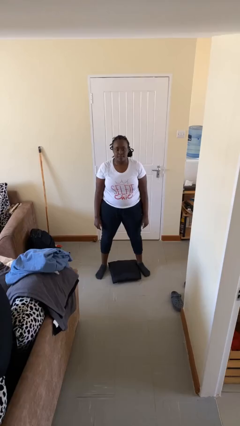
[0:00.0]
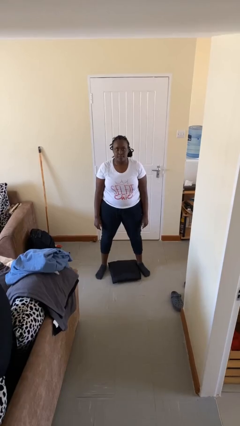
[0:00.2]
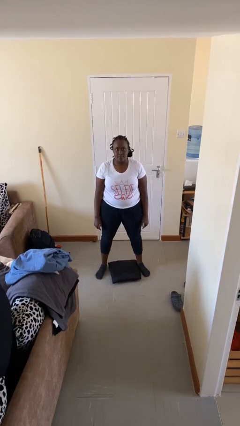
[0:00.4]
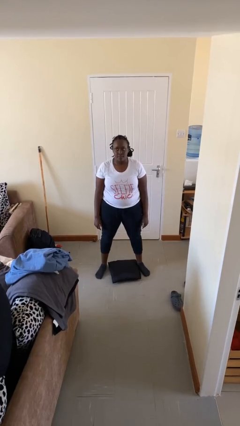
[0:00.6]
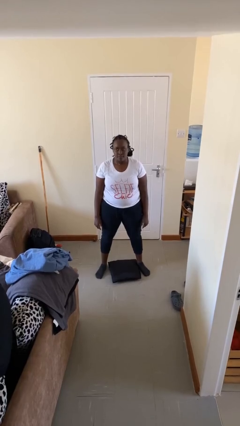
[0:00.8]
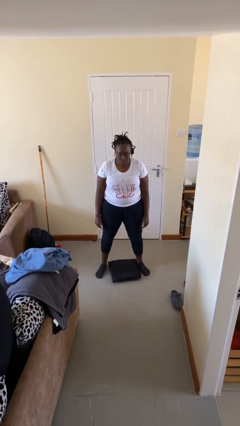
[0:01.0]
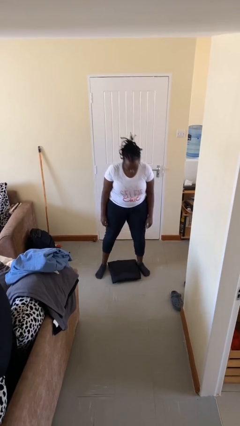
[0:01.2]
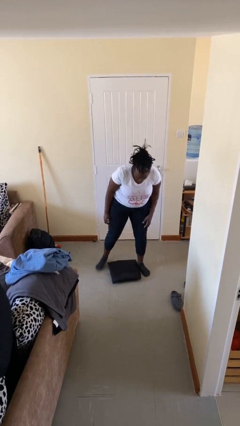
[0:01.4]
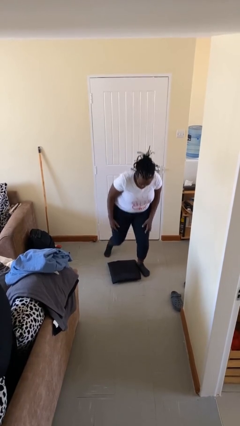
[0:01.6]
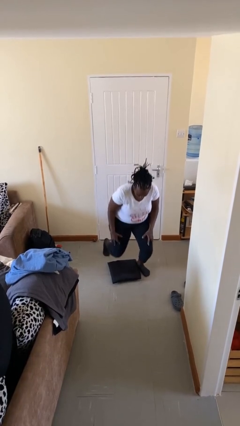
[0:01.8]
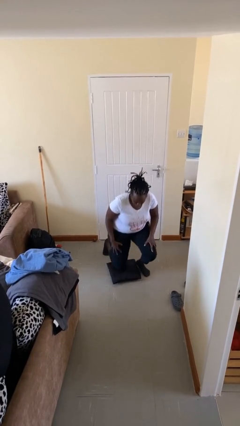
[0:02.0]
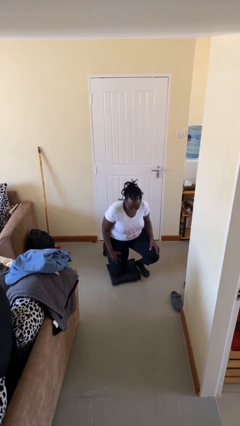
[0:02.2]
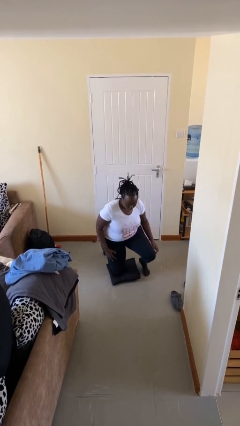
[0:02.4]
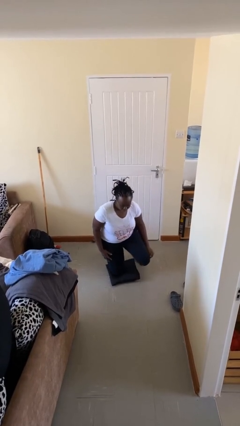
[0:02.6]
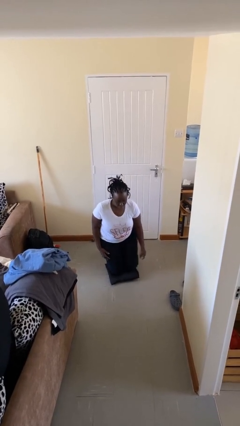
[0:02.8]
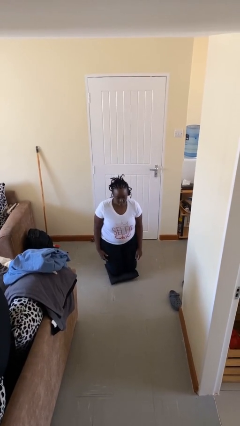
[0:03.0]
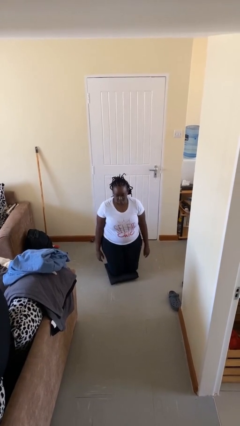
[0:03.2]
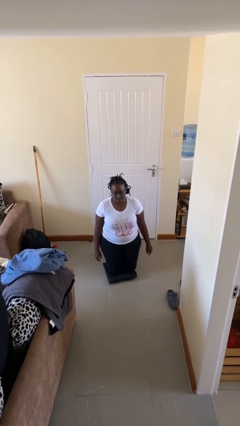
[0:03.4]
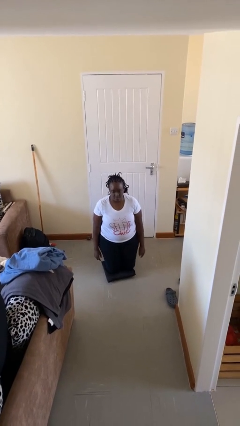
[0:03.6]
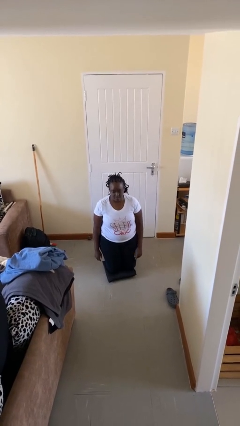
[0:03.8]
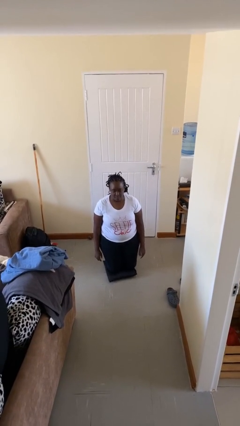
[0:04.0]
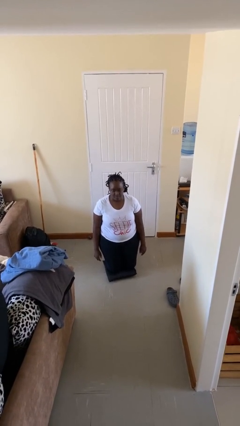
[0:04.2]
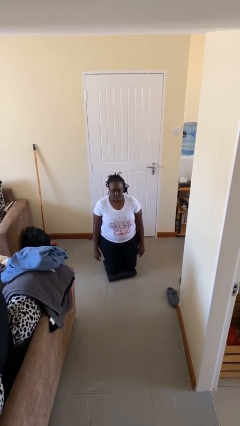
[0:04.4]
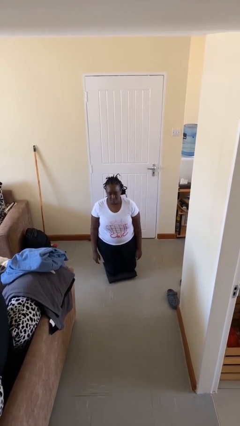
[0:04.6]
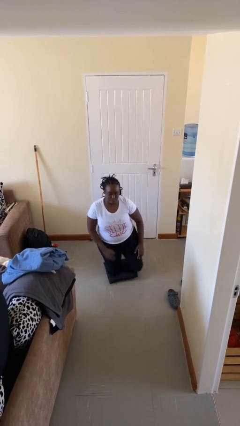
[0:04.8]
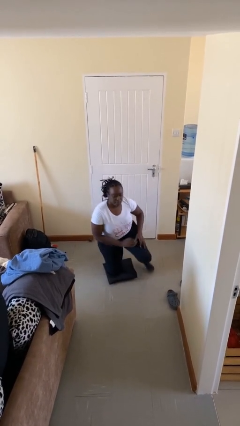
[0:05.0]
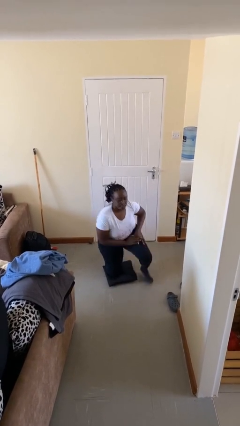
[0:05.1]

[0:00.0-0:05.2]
person kneels

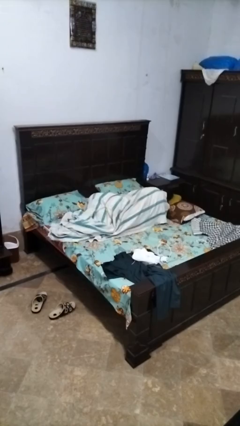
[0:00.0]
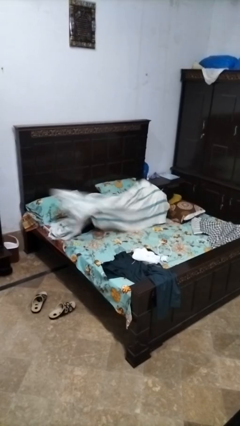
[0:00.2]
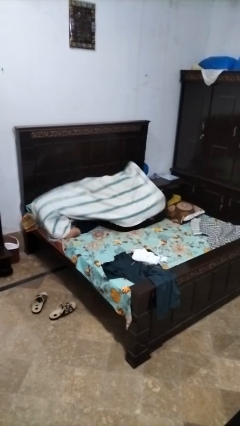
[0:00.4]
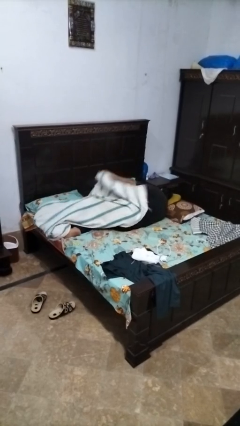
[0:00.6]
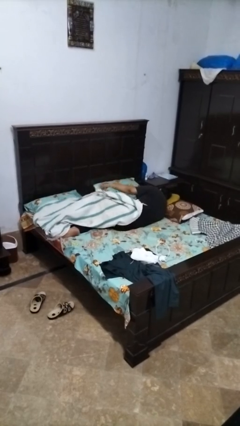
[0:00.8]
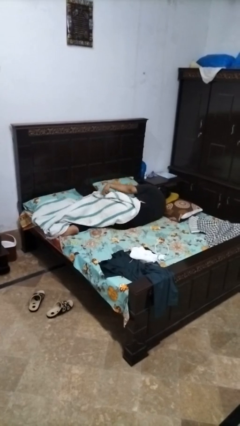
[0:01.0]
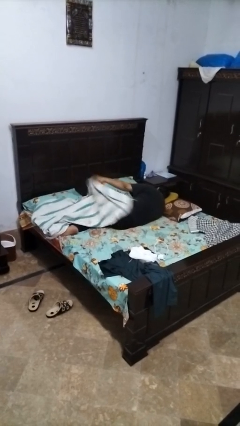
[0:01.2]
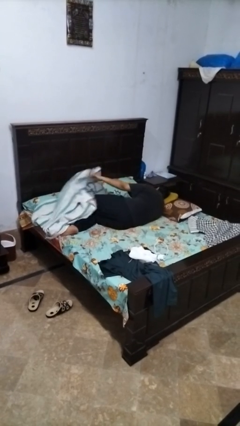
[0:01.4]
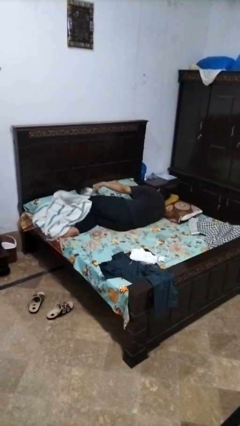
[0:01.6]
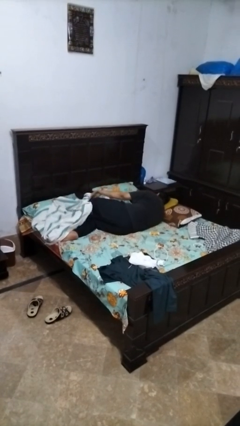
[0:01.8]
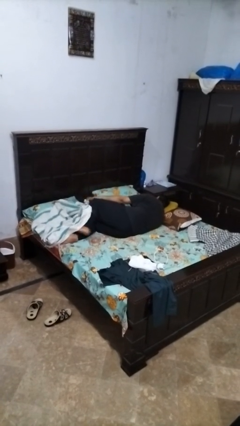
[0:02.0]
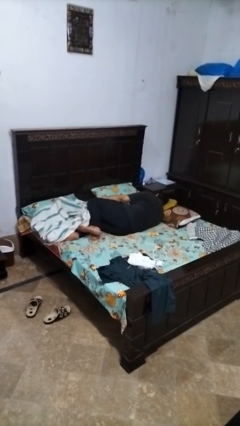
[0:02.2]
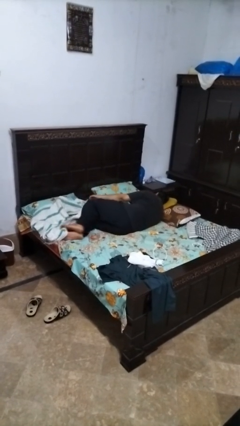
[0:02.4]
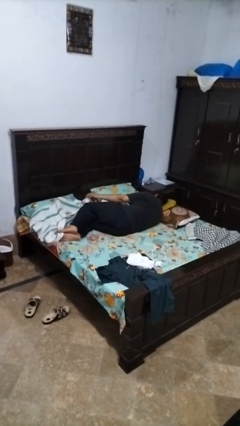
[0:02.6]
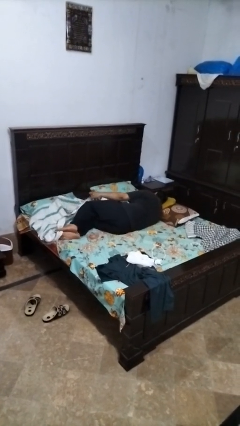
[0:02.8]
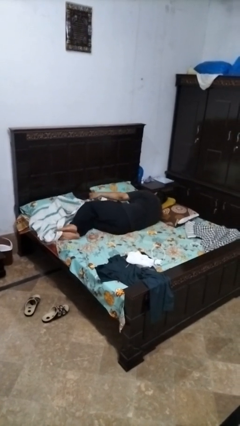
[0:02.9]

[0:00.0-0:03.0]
person uncovers with bedsheets

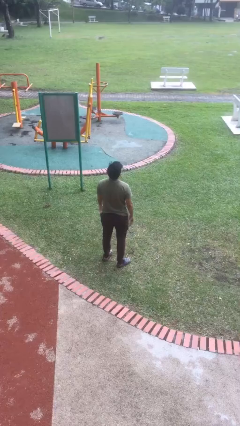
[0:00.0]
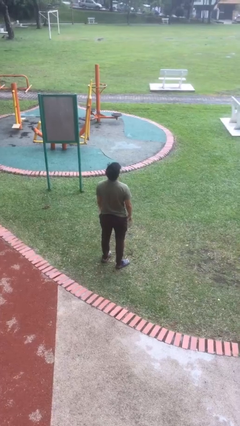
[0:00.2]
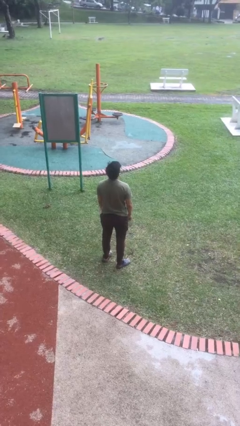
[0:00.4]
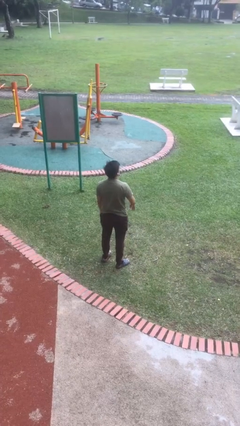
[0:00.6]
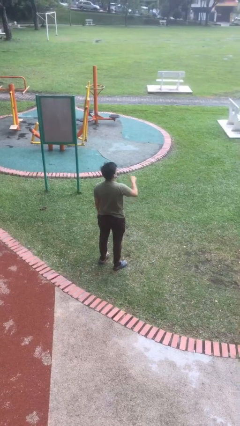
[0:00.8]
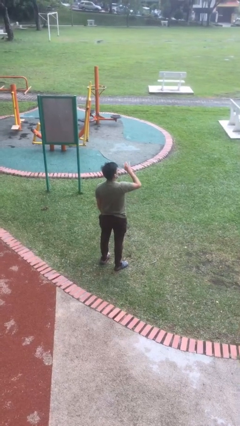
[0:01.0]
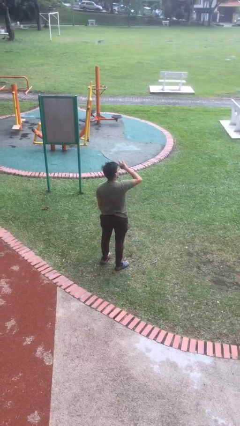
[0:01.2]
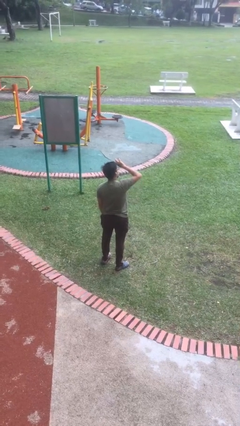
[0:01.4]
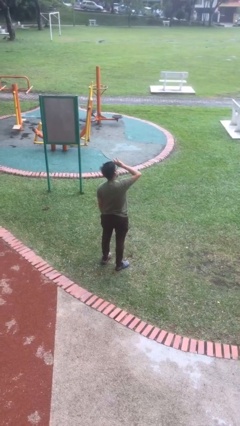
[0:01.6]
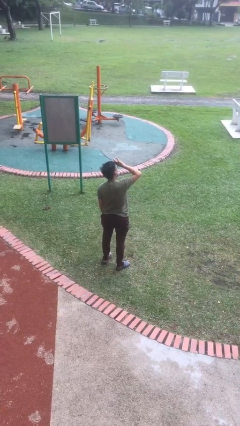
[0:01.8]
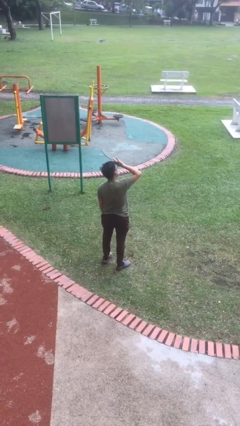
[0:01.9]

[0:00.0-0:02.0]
person shades eyes

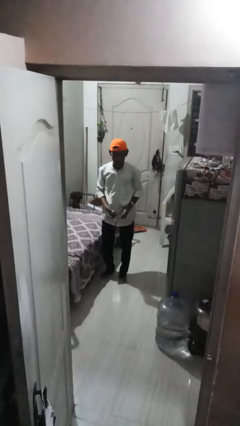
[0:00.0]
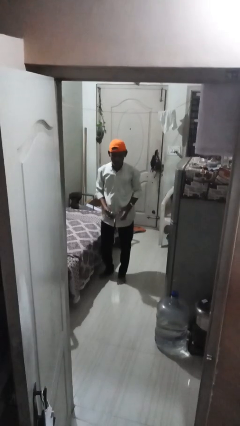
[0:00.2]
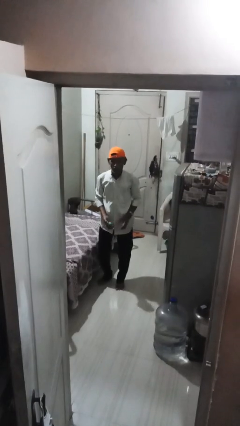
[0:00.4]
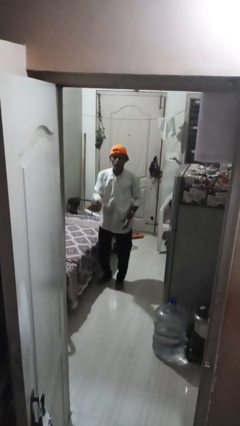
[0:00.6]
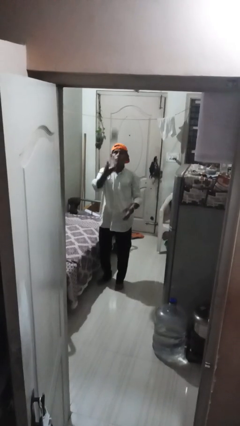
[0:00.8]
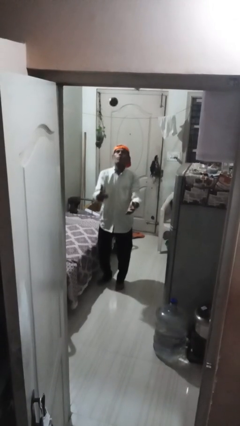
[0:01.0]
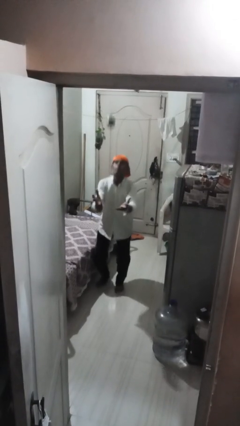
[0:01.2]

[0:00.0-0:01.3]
person drops object

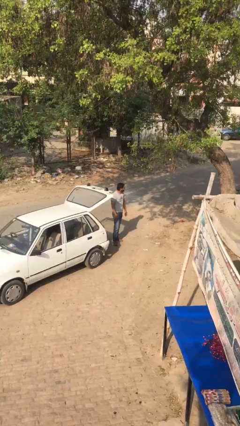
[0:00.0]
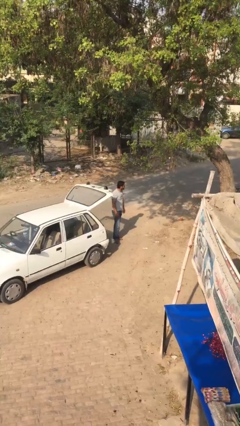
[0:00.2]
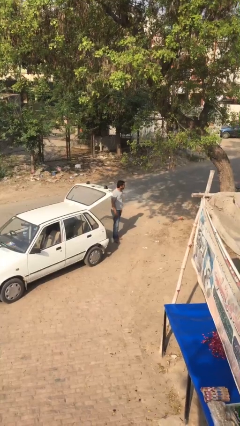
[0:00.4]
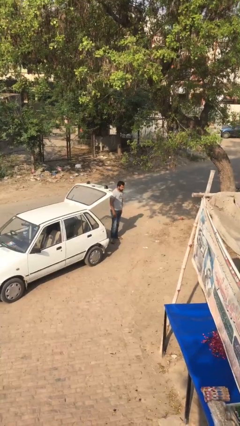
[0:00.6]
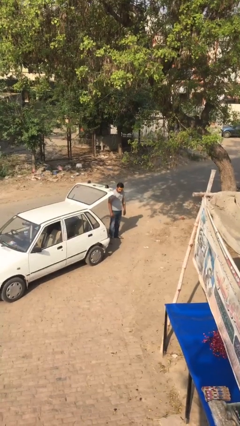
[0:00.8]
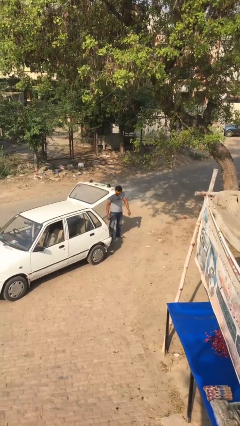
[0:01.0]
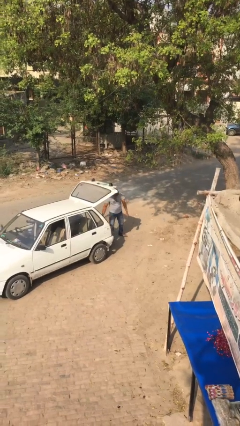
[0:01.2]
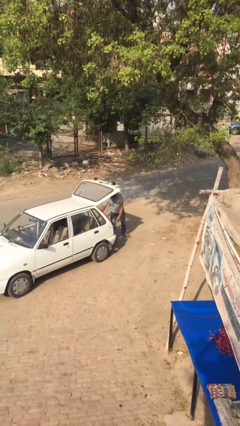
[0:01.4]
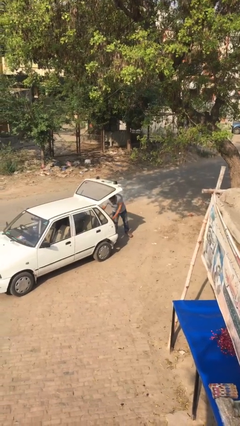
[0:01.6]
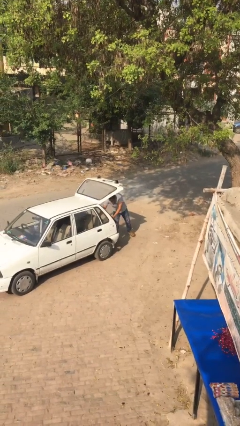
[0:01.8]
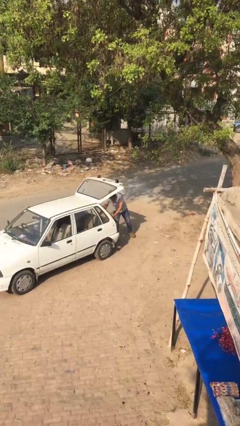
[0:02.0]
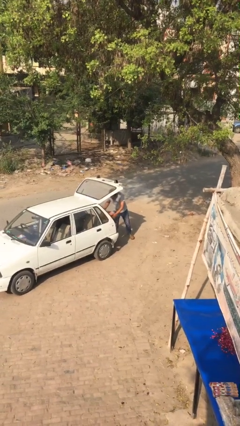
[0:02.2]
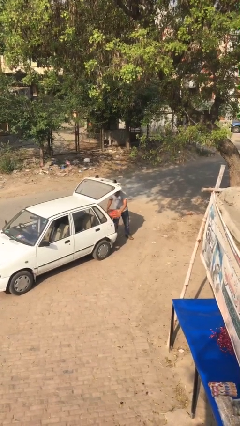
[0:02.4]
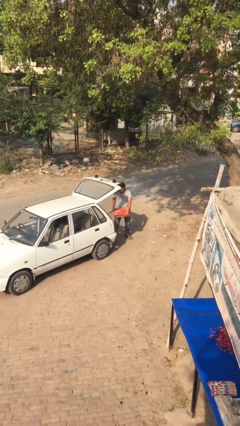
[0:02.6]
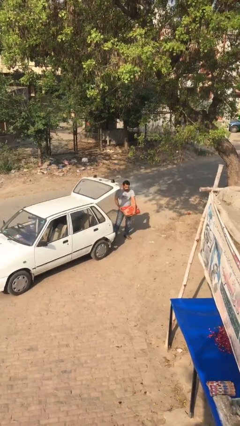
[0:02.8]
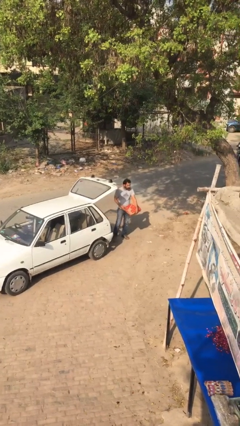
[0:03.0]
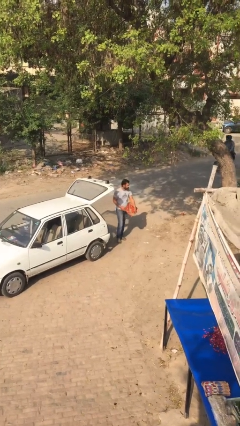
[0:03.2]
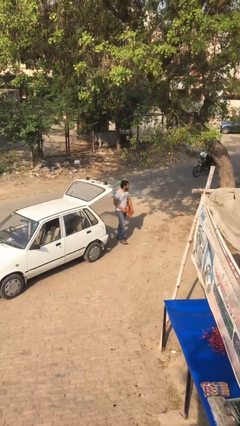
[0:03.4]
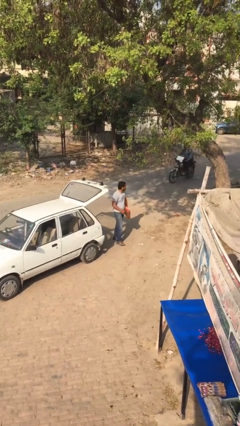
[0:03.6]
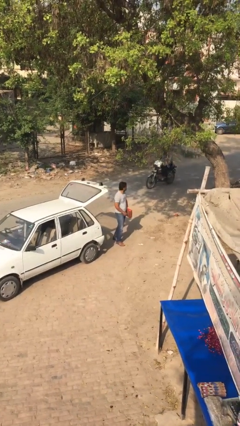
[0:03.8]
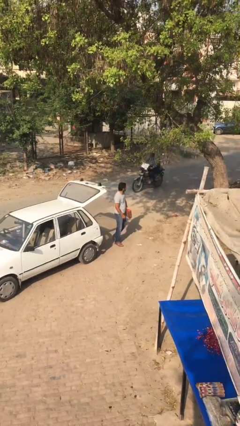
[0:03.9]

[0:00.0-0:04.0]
person unloads car

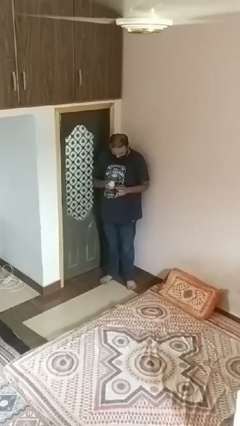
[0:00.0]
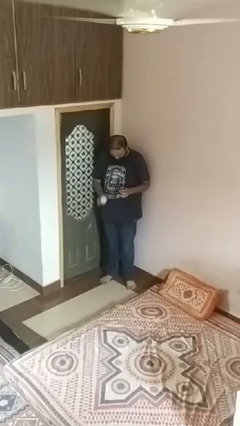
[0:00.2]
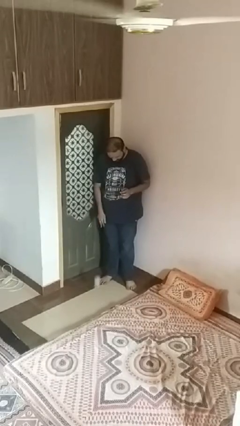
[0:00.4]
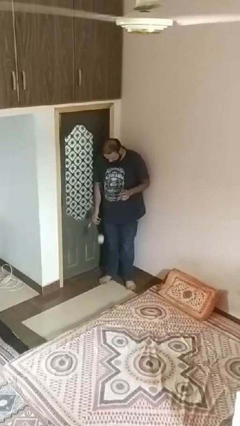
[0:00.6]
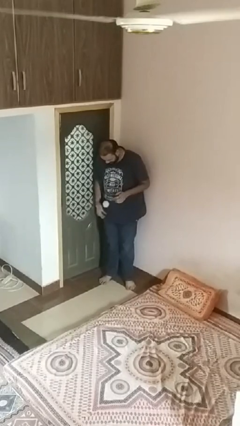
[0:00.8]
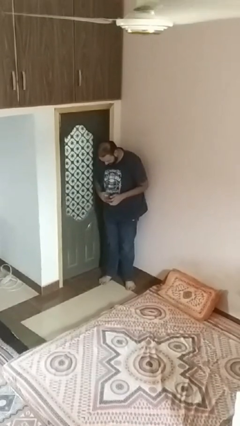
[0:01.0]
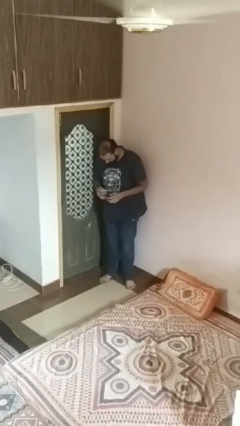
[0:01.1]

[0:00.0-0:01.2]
person bounces ball on floor

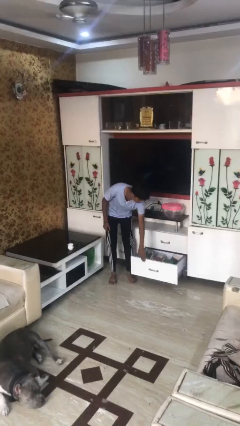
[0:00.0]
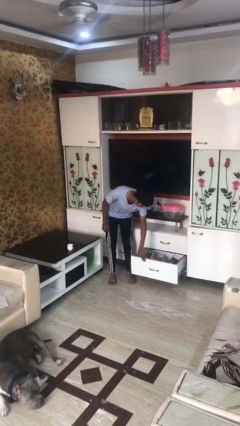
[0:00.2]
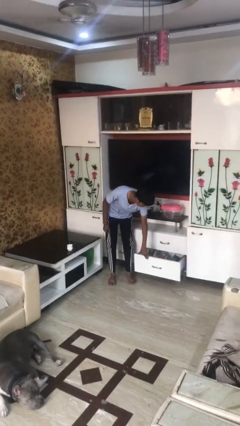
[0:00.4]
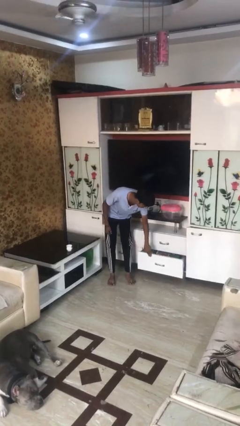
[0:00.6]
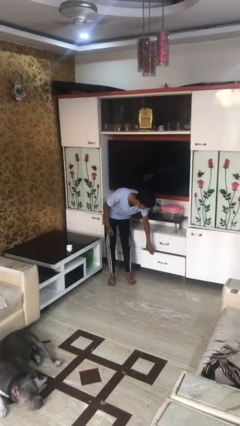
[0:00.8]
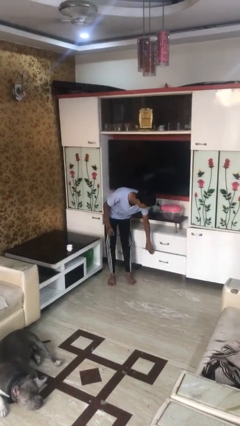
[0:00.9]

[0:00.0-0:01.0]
person closes dresser drawer
